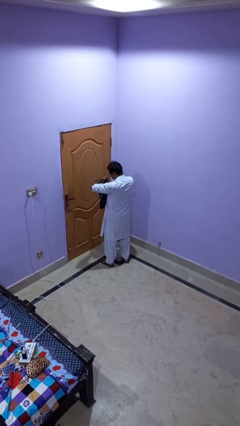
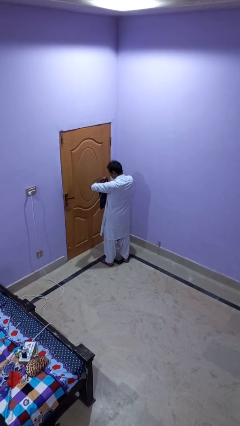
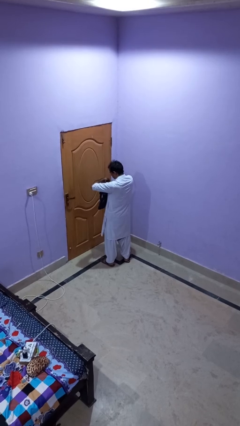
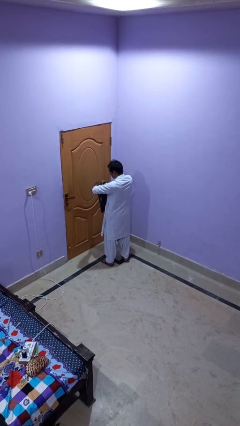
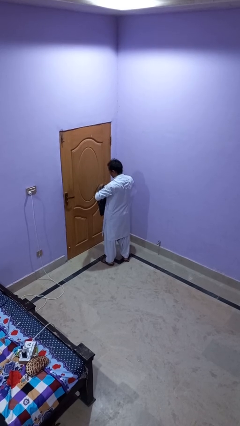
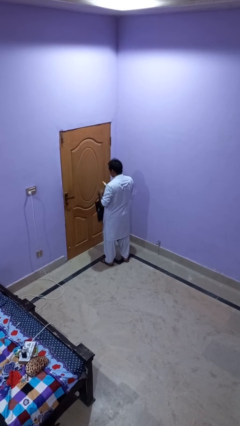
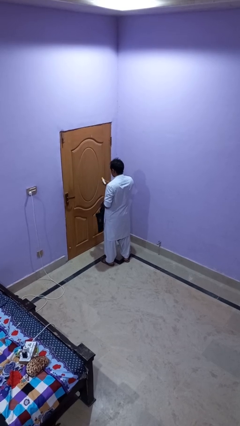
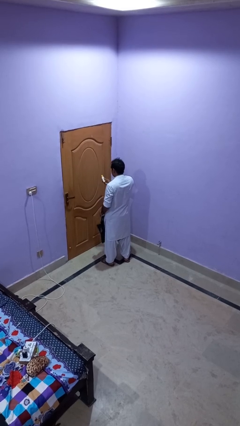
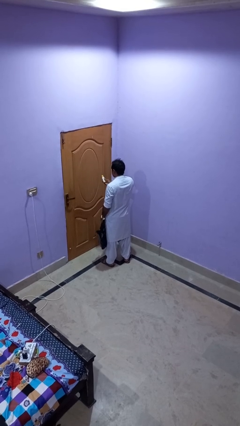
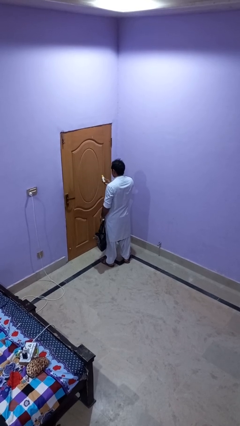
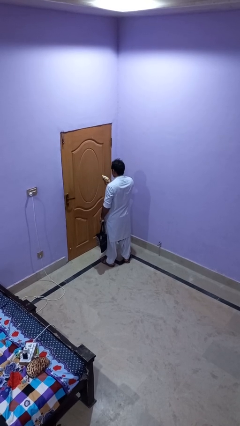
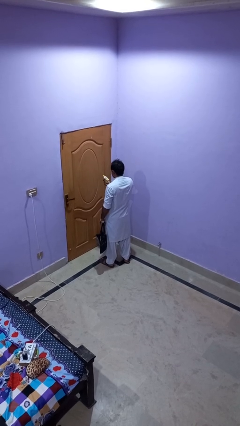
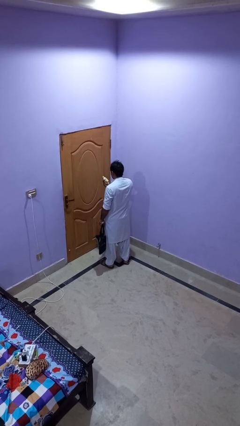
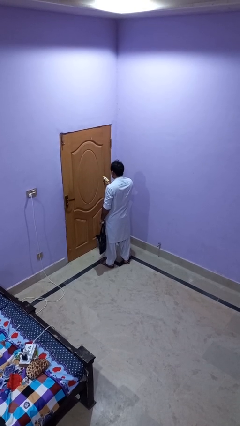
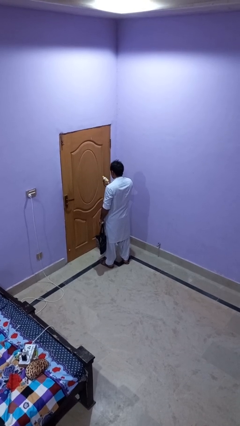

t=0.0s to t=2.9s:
person takes object from purse

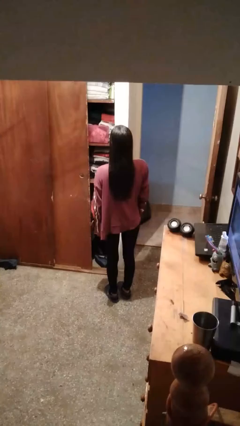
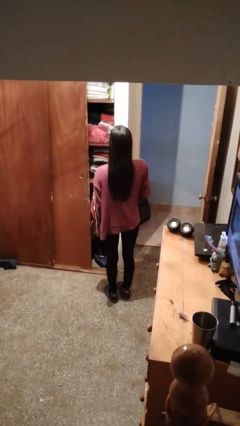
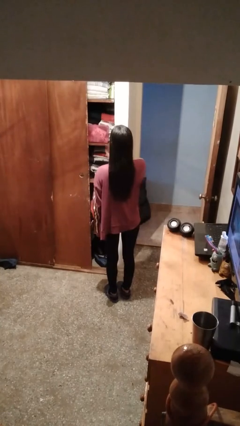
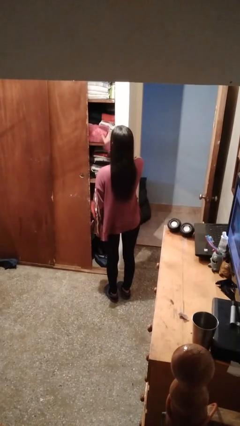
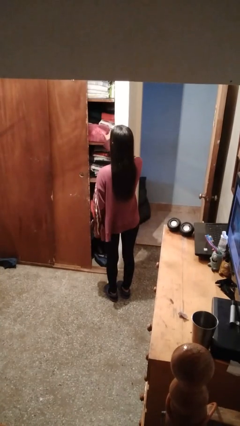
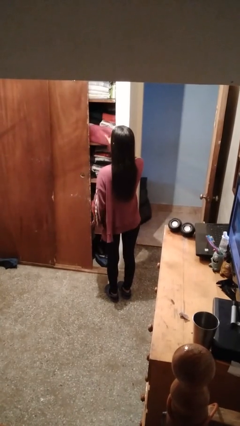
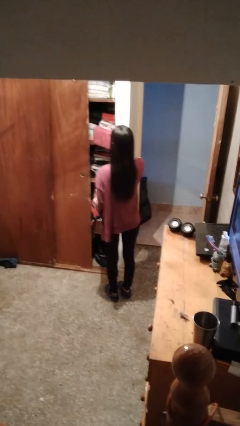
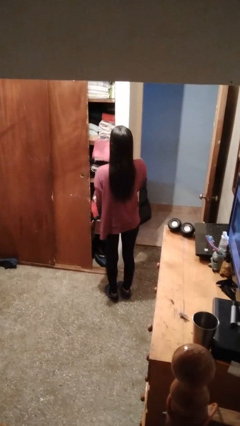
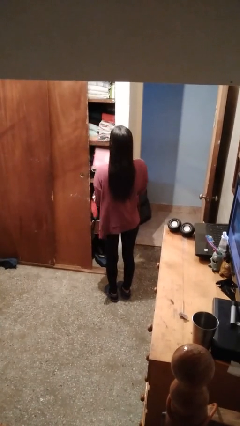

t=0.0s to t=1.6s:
person puts down object on shelf

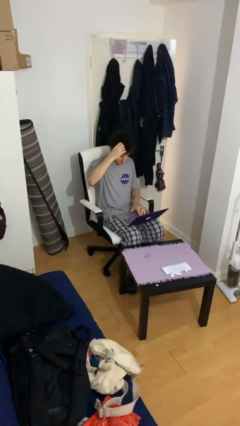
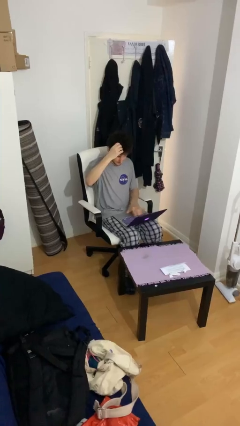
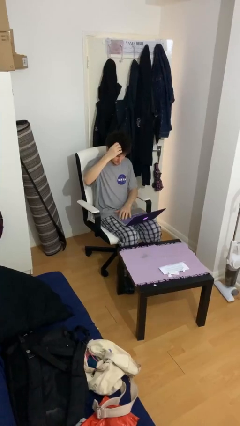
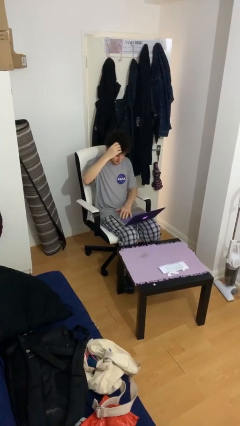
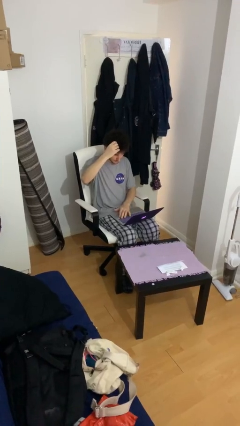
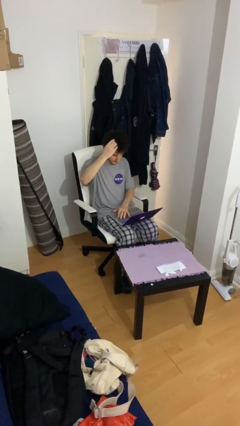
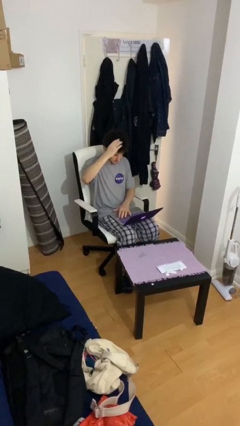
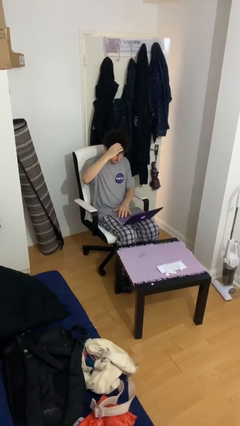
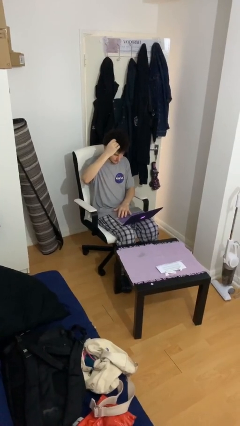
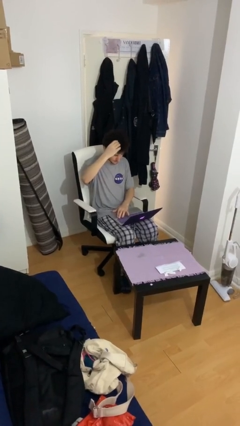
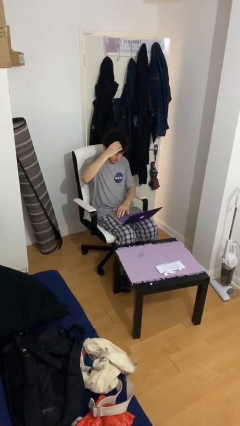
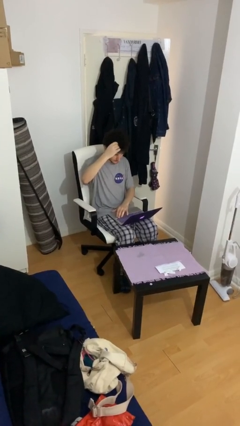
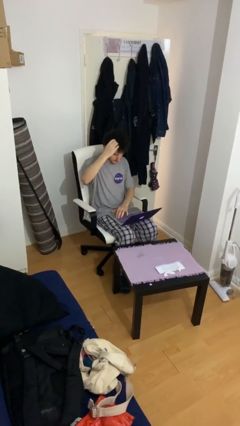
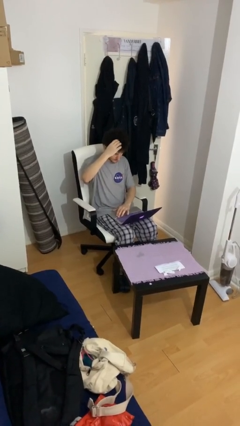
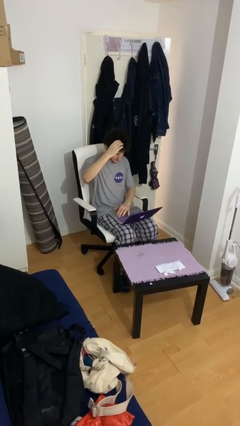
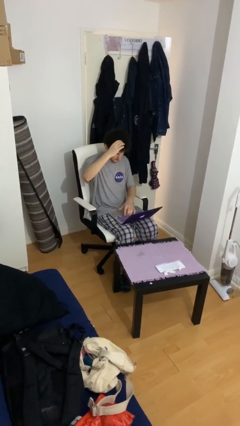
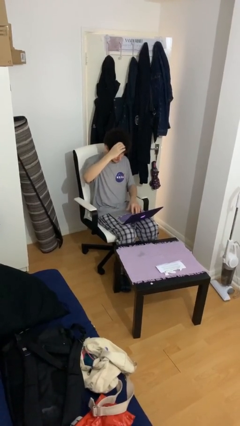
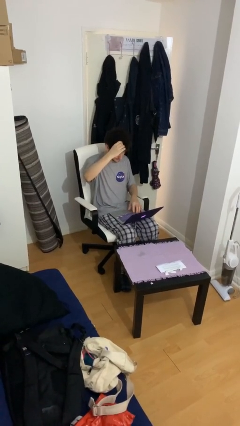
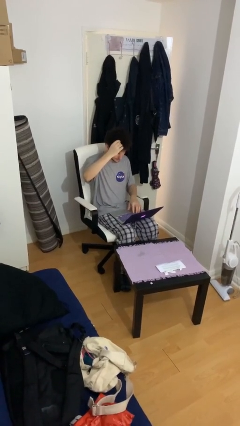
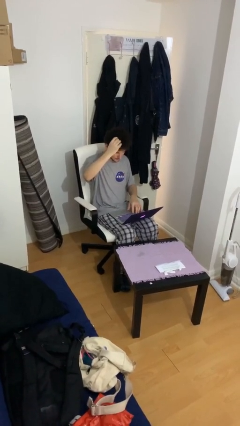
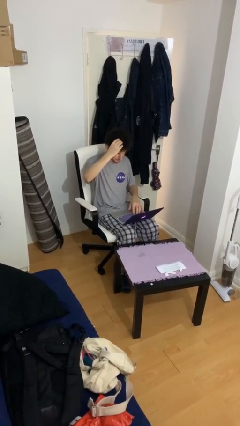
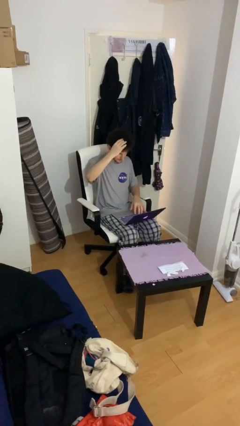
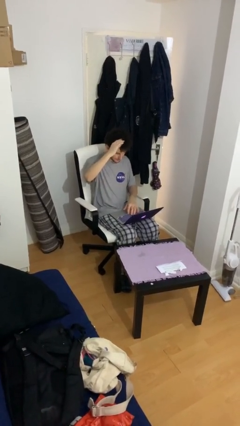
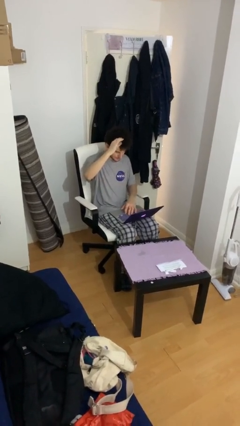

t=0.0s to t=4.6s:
person interacts with laptop

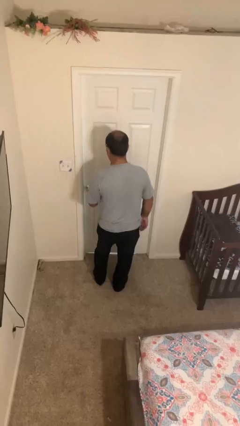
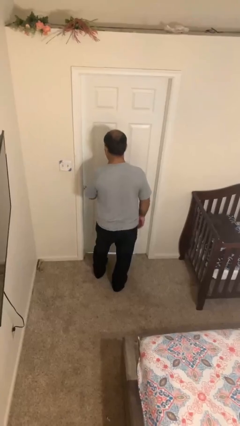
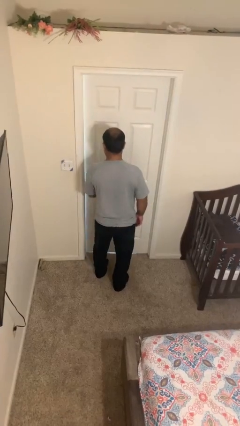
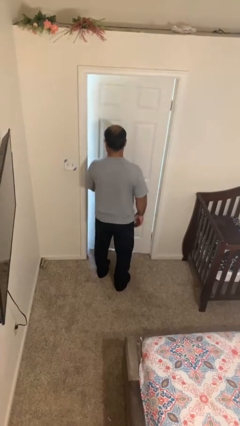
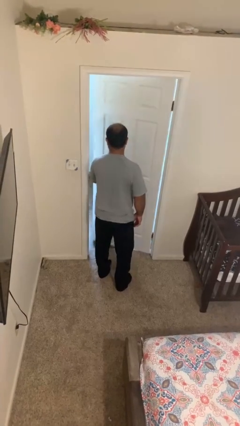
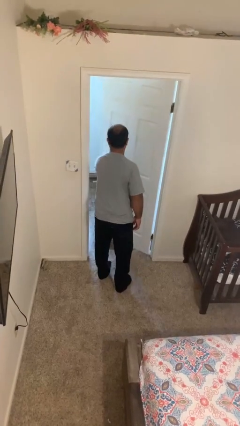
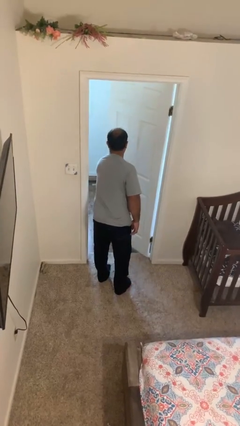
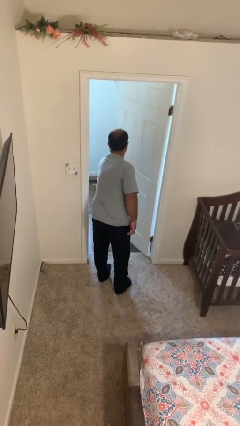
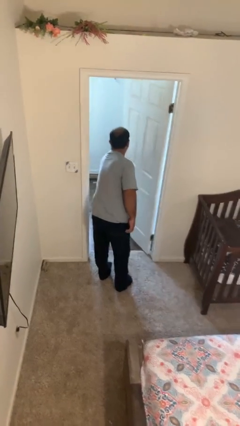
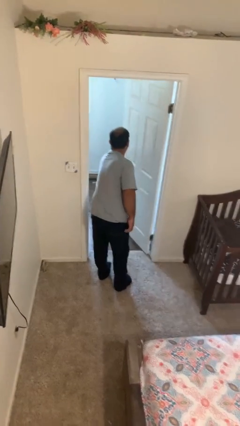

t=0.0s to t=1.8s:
person opens facility door

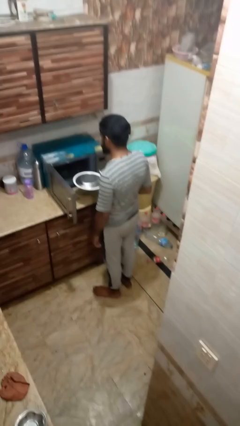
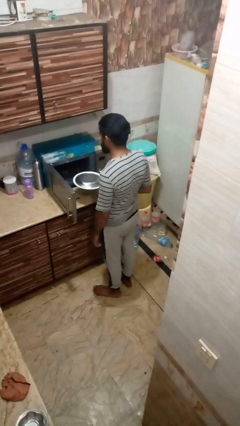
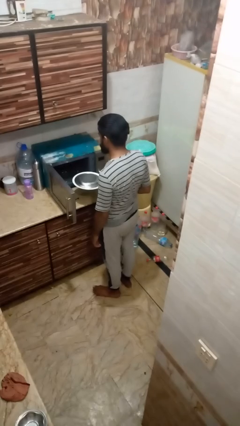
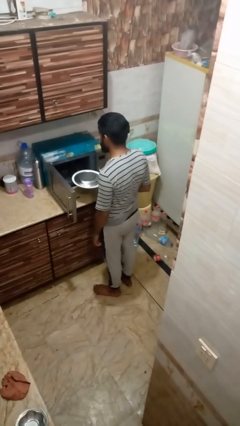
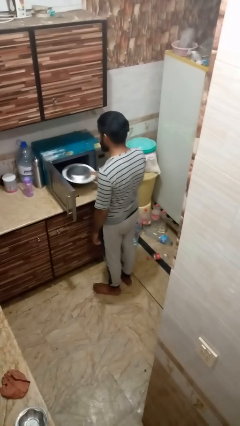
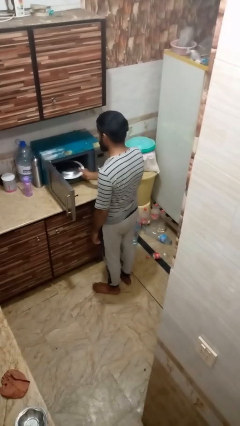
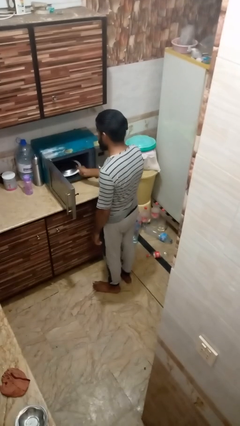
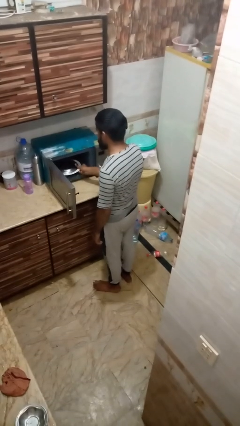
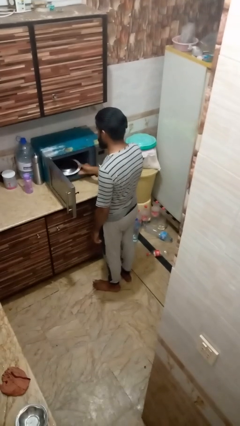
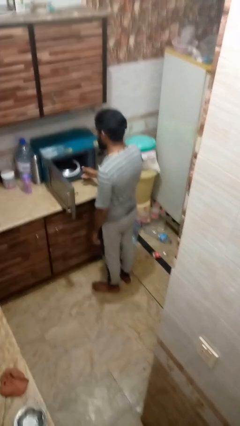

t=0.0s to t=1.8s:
person puts object into oven

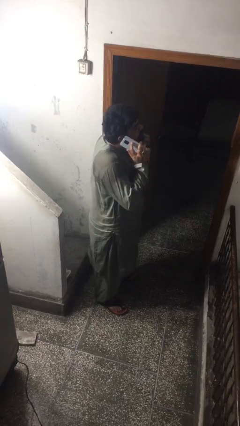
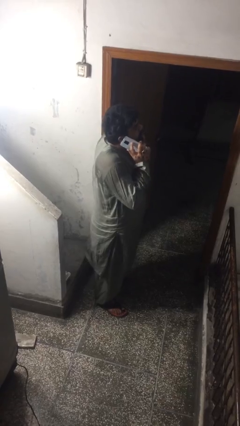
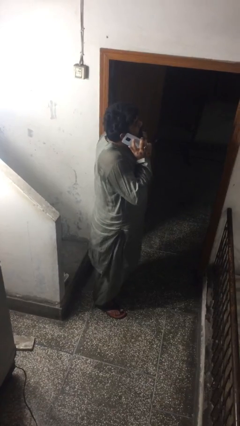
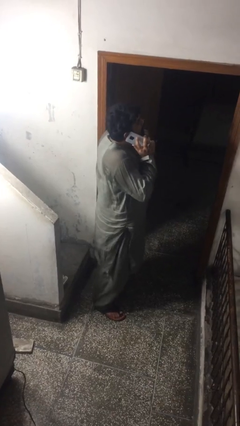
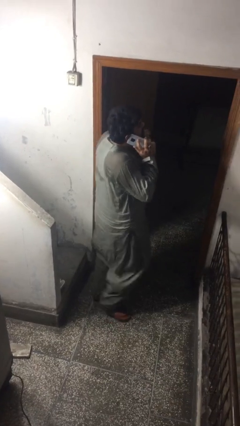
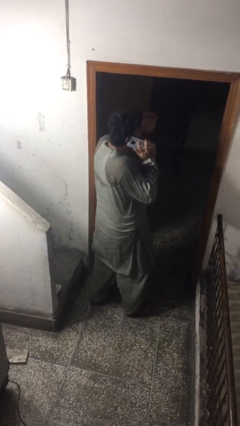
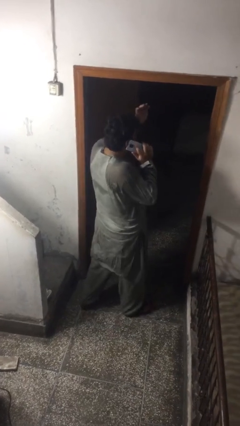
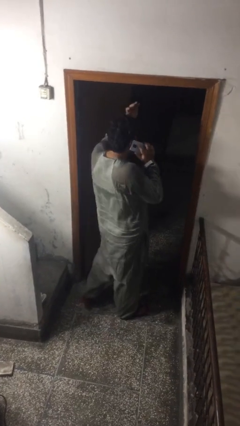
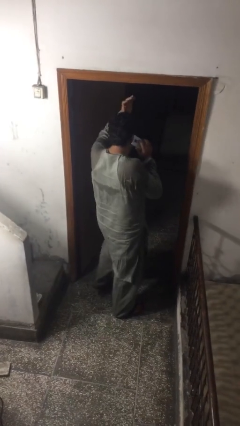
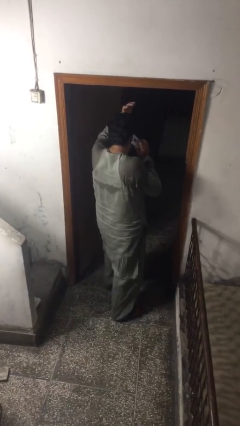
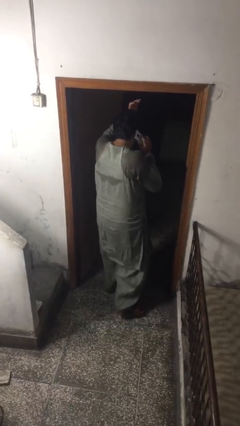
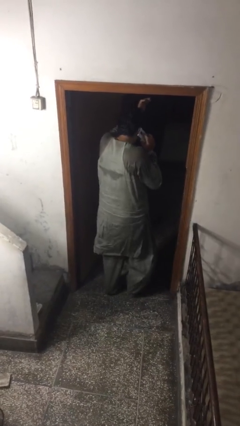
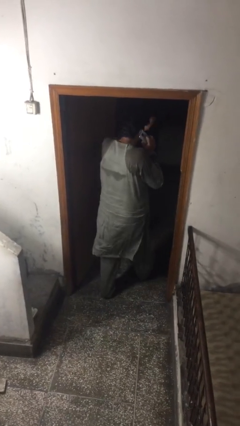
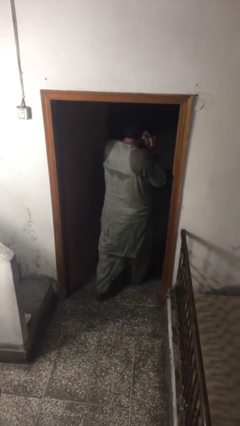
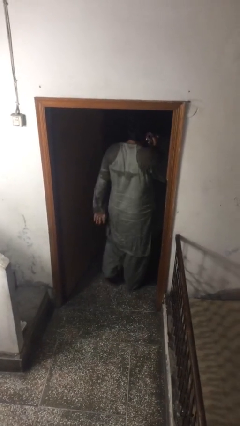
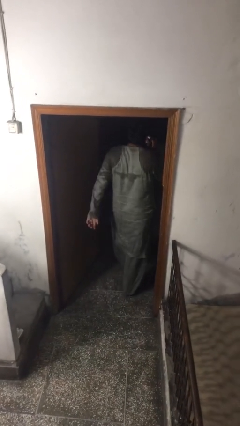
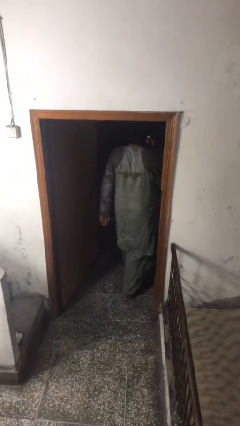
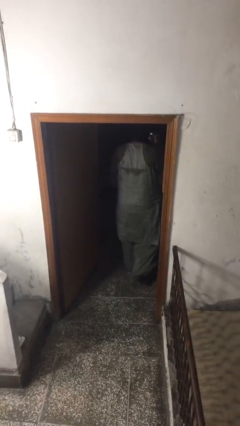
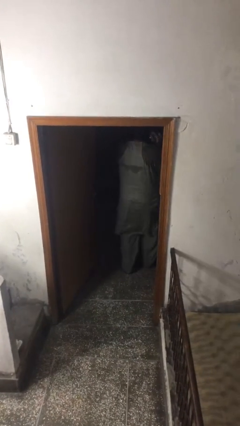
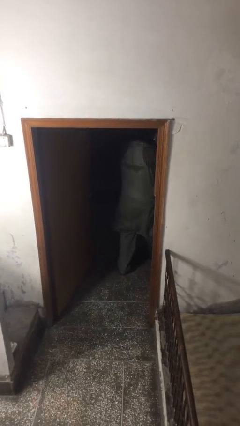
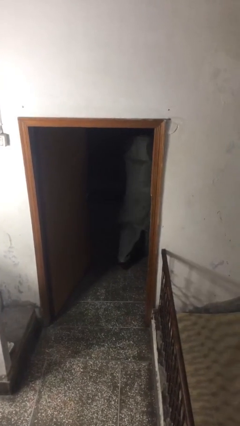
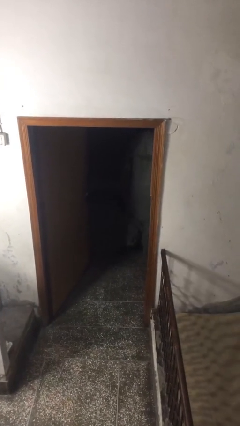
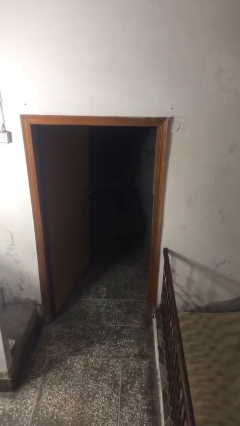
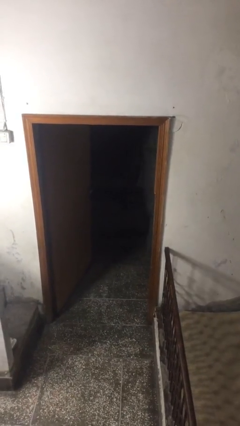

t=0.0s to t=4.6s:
person exits scene through structure

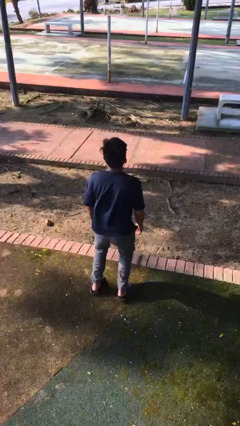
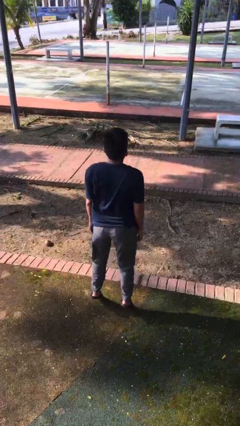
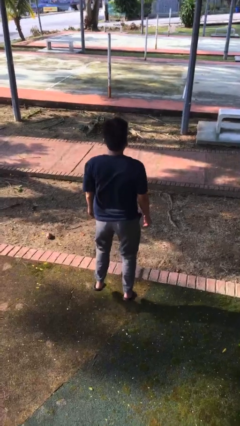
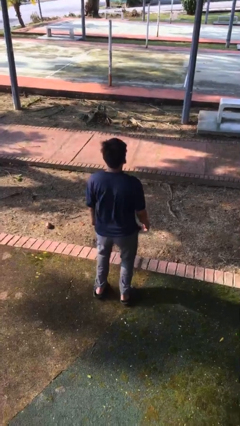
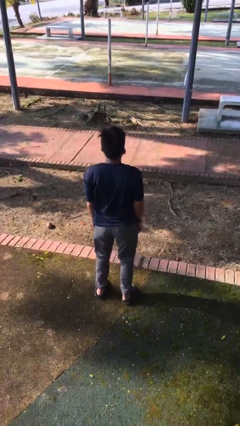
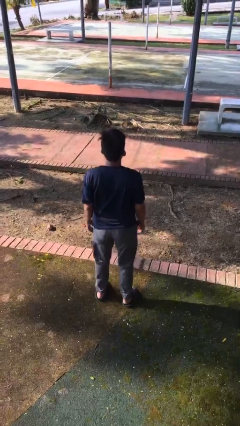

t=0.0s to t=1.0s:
person jumps
